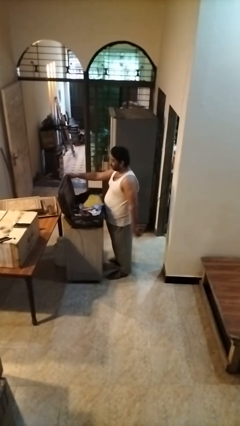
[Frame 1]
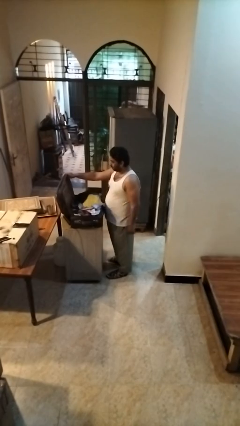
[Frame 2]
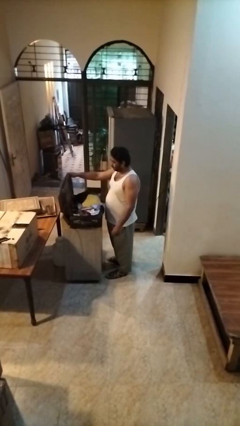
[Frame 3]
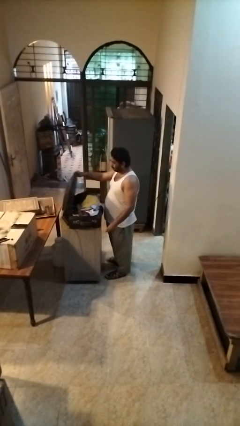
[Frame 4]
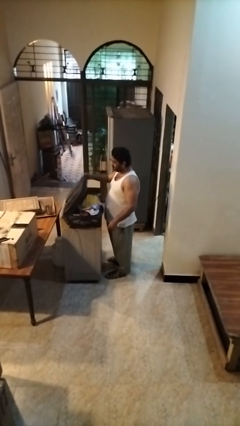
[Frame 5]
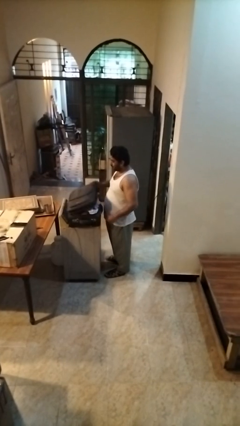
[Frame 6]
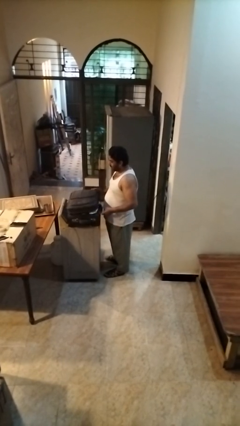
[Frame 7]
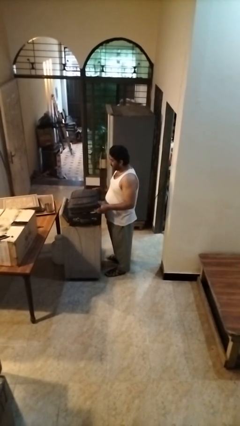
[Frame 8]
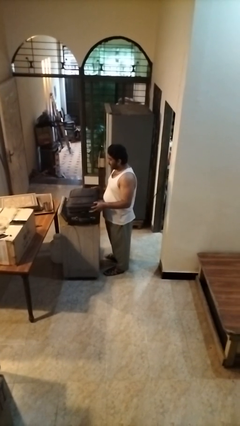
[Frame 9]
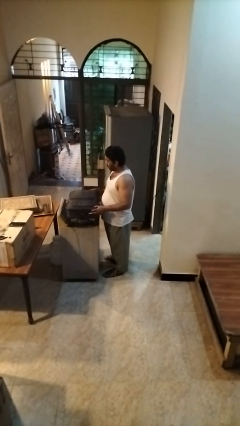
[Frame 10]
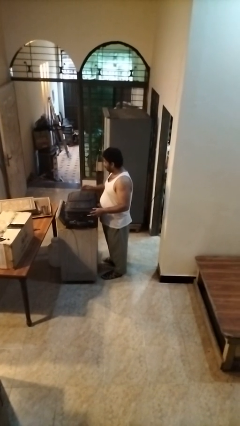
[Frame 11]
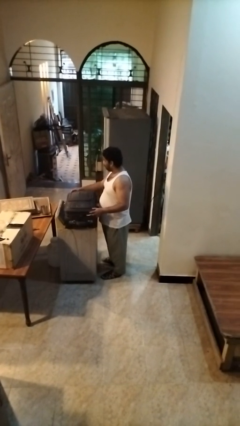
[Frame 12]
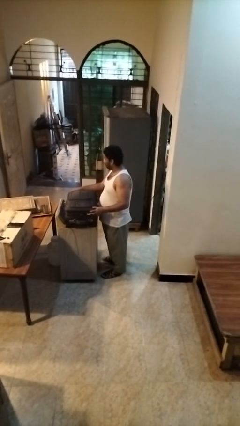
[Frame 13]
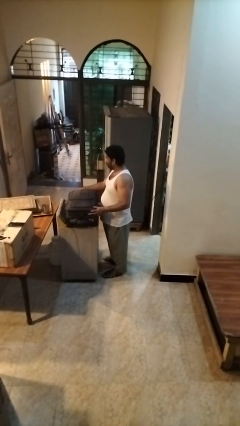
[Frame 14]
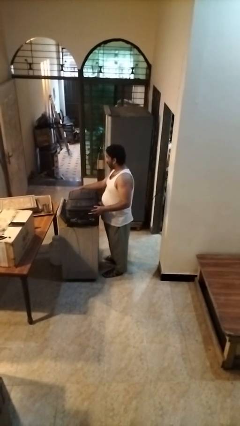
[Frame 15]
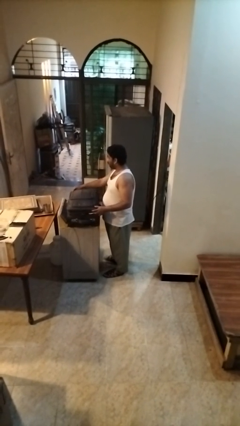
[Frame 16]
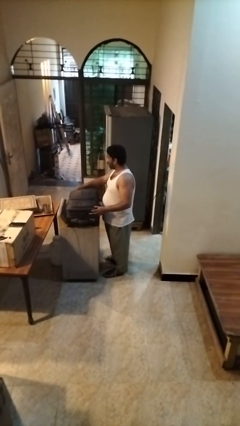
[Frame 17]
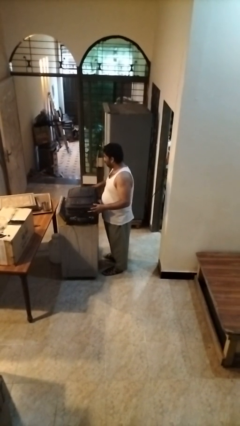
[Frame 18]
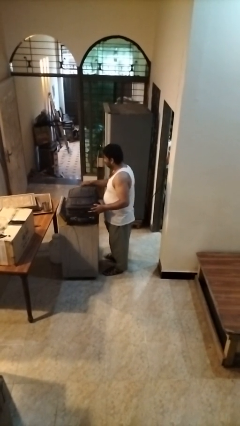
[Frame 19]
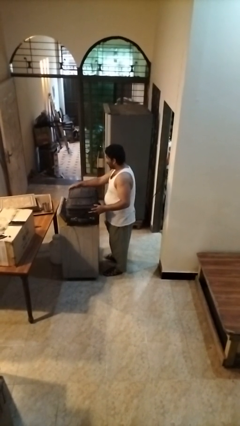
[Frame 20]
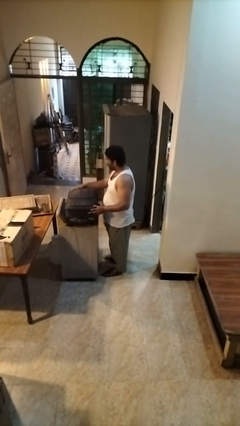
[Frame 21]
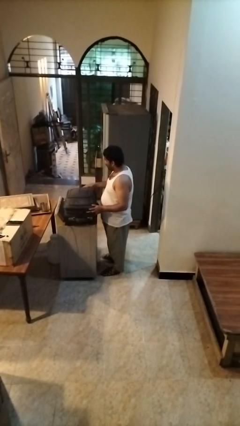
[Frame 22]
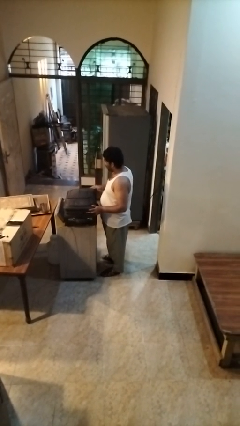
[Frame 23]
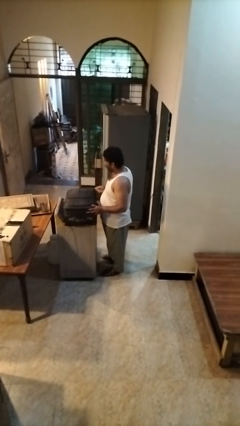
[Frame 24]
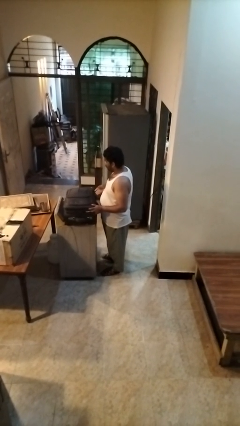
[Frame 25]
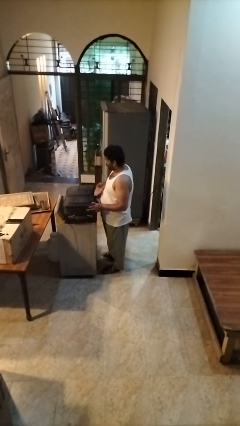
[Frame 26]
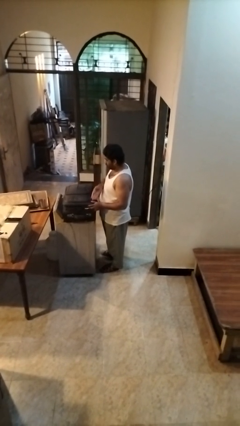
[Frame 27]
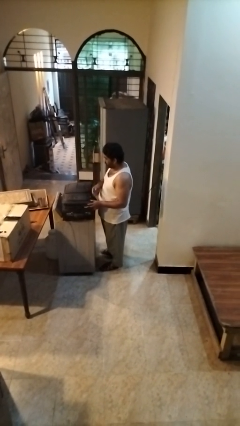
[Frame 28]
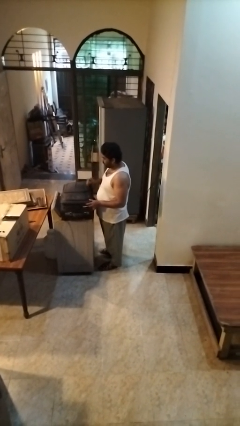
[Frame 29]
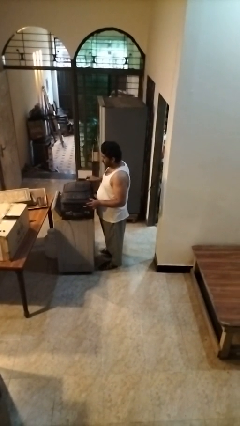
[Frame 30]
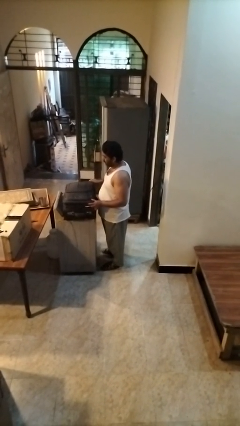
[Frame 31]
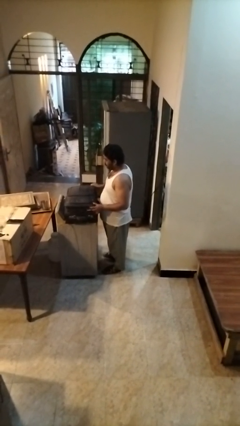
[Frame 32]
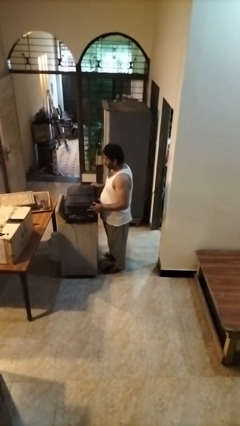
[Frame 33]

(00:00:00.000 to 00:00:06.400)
person closes suitcase

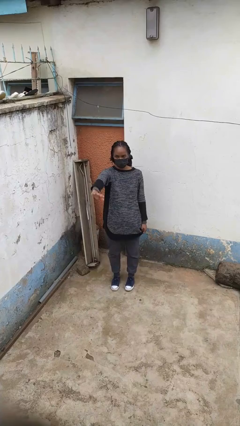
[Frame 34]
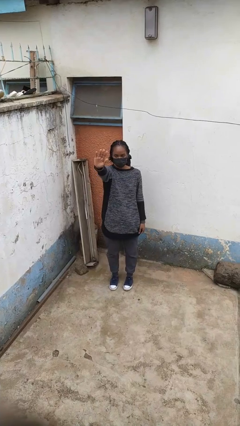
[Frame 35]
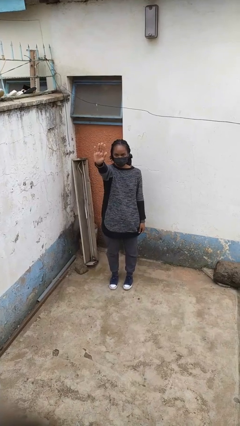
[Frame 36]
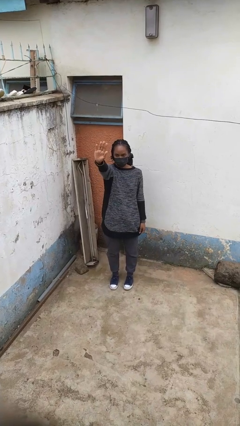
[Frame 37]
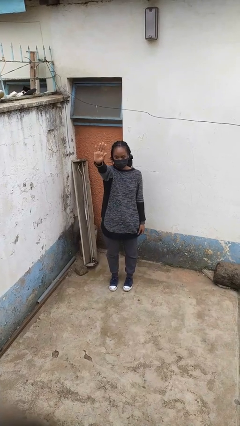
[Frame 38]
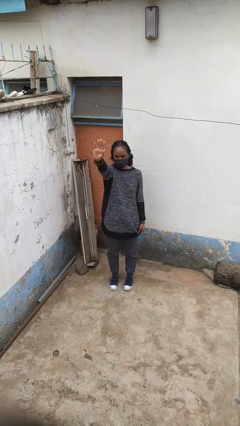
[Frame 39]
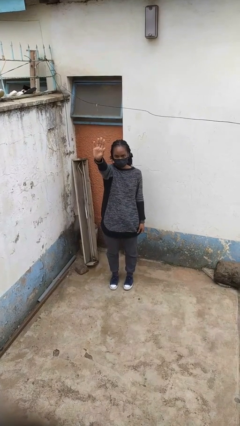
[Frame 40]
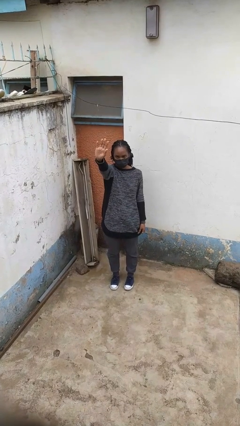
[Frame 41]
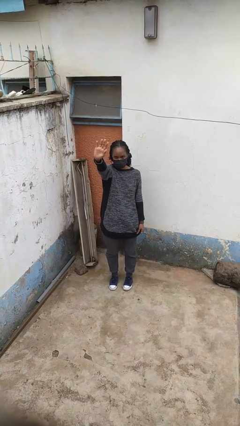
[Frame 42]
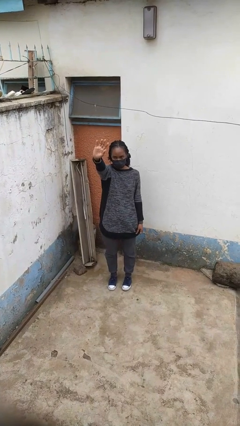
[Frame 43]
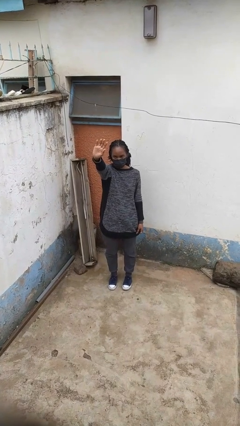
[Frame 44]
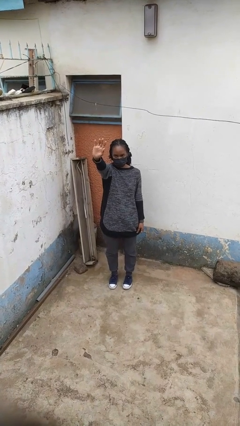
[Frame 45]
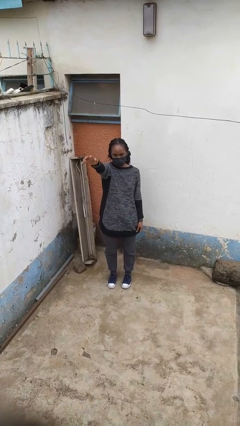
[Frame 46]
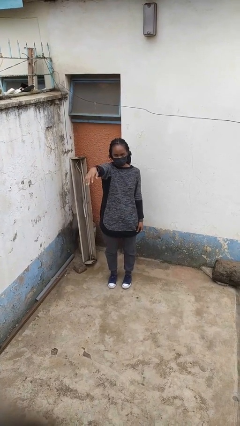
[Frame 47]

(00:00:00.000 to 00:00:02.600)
person waves at person

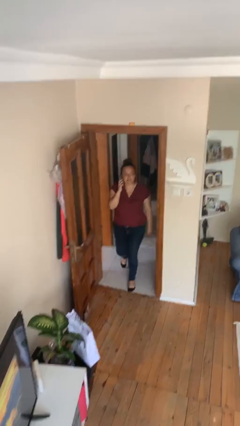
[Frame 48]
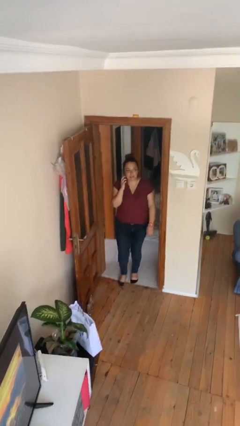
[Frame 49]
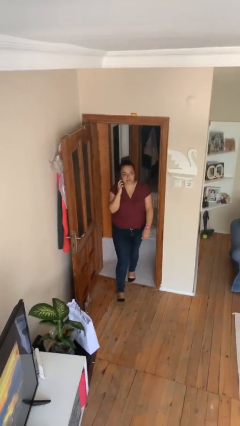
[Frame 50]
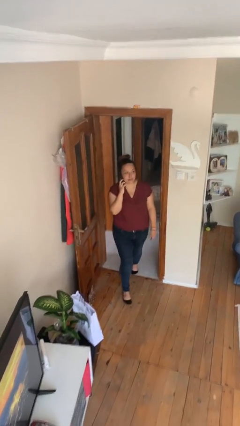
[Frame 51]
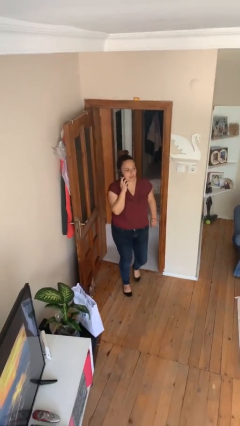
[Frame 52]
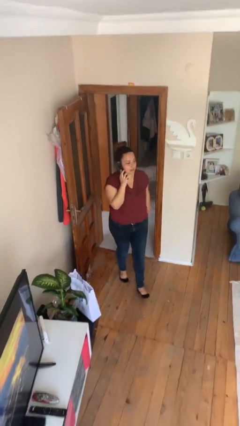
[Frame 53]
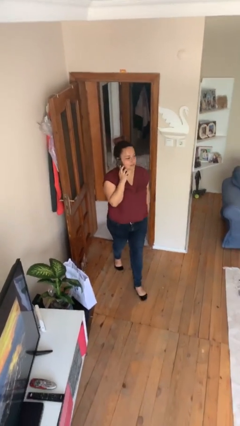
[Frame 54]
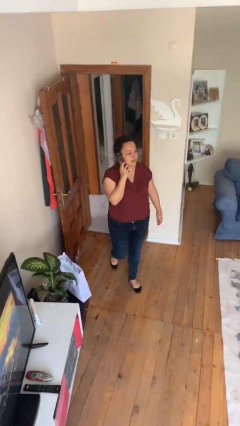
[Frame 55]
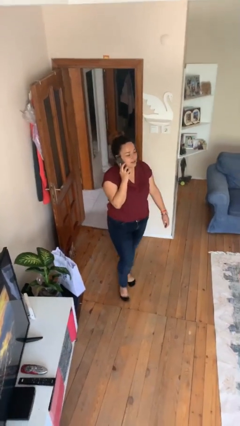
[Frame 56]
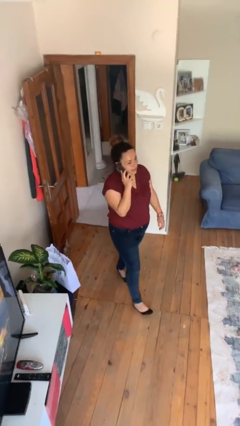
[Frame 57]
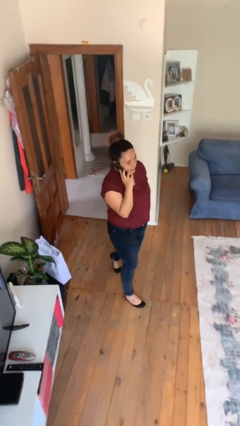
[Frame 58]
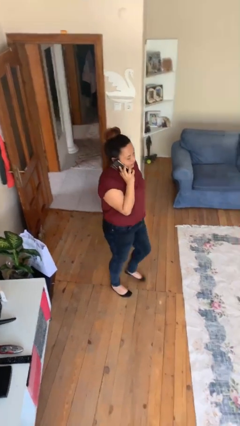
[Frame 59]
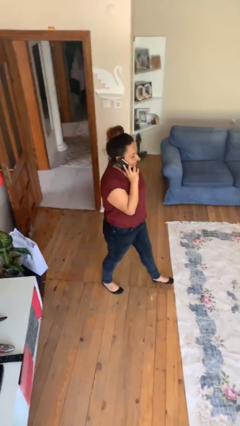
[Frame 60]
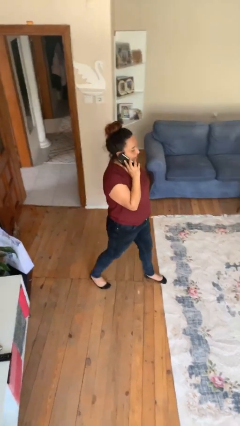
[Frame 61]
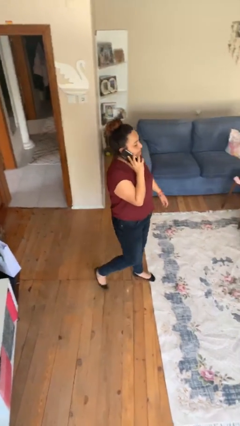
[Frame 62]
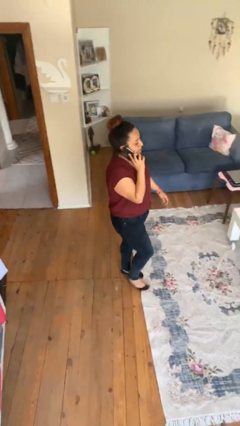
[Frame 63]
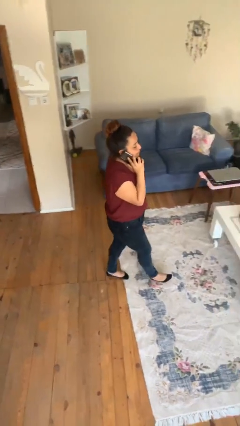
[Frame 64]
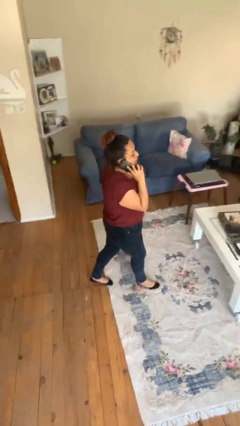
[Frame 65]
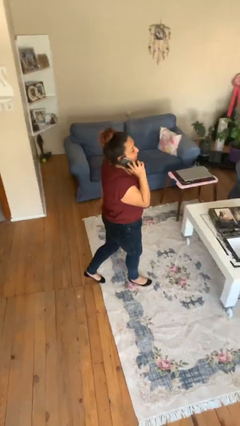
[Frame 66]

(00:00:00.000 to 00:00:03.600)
person enters scene through structure

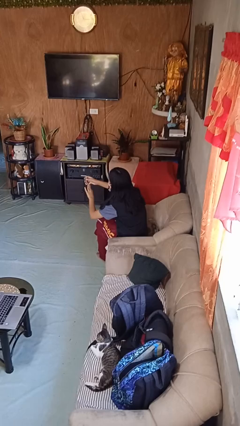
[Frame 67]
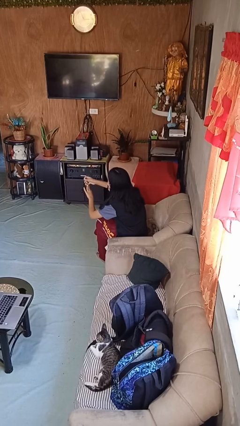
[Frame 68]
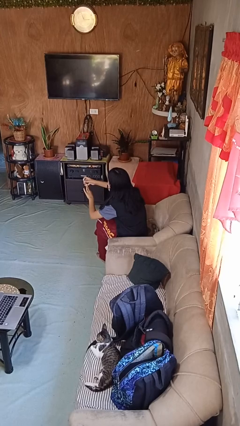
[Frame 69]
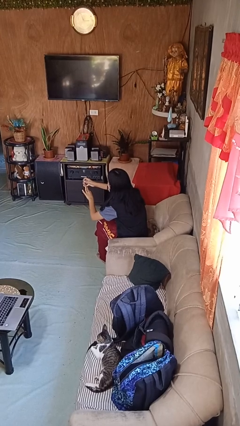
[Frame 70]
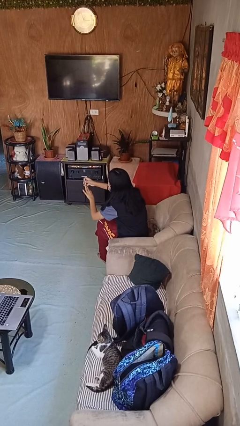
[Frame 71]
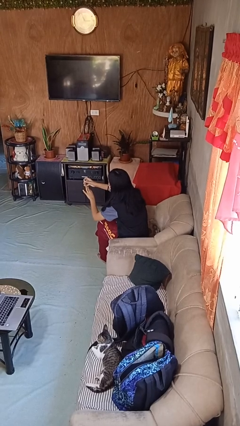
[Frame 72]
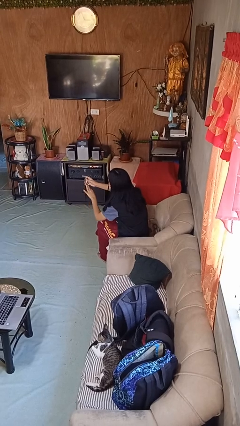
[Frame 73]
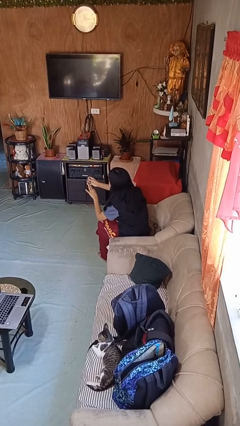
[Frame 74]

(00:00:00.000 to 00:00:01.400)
person clips fingernails

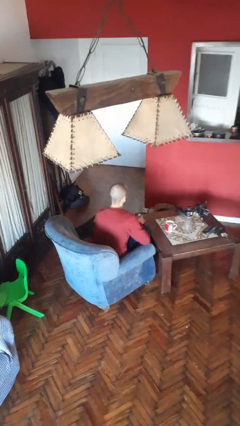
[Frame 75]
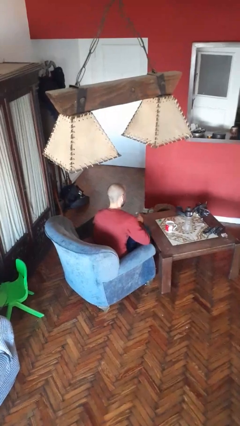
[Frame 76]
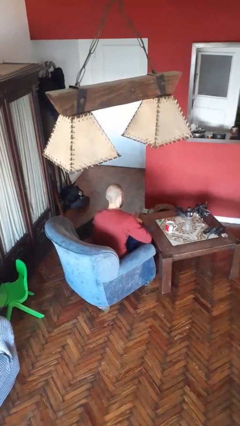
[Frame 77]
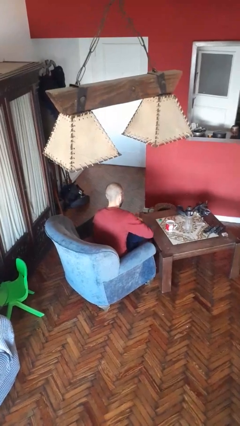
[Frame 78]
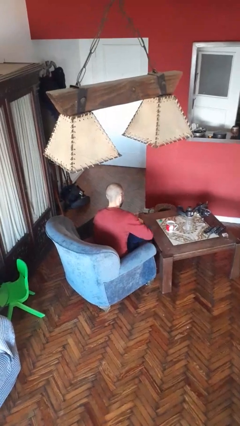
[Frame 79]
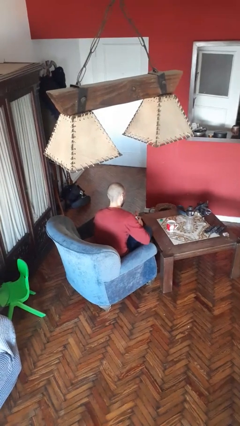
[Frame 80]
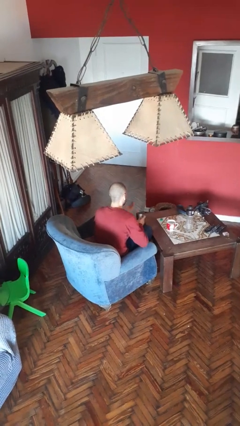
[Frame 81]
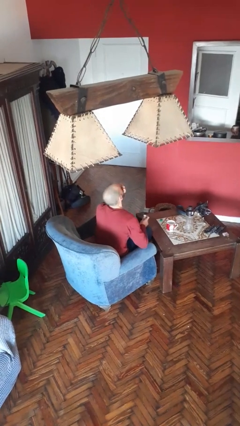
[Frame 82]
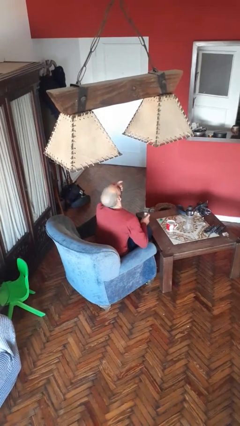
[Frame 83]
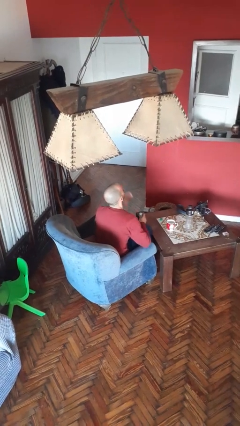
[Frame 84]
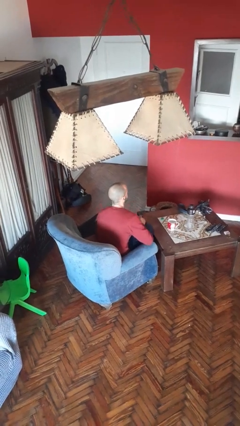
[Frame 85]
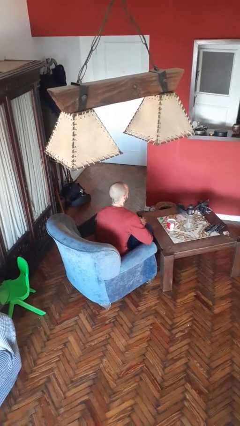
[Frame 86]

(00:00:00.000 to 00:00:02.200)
person takes medicine pills

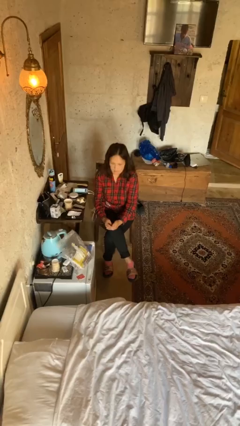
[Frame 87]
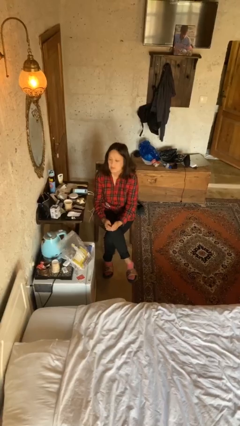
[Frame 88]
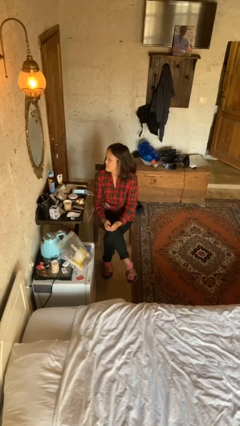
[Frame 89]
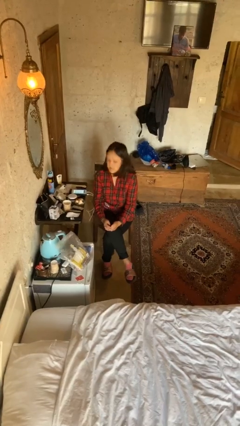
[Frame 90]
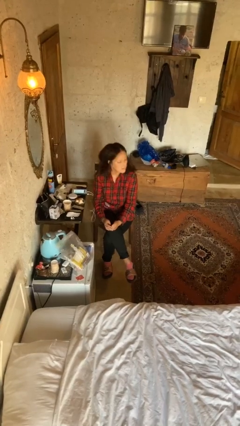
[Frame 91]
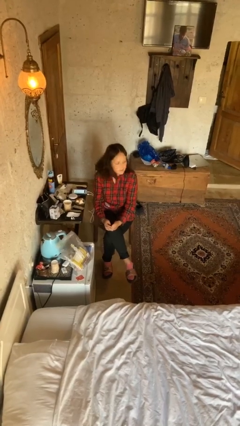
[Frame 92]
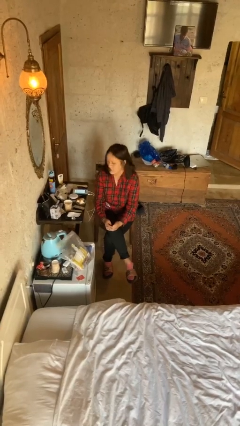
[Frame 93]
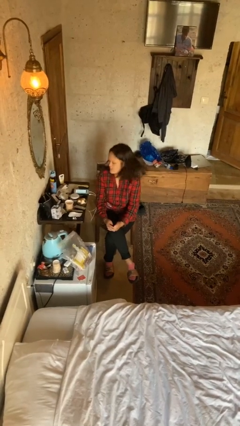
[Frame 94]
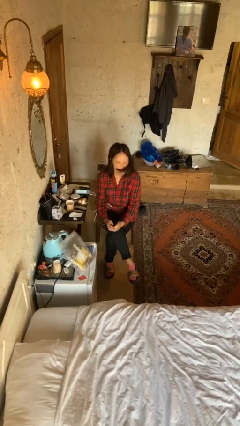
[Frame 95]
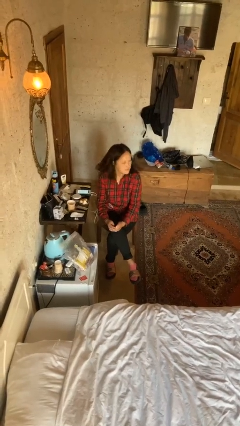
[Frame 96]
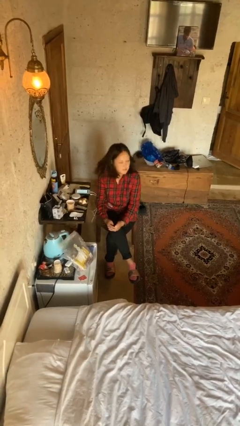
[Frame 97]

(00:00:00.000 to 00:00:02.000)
person shakes head
